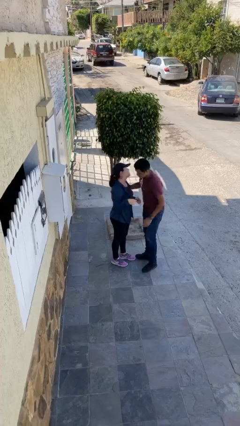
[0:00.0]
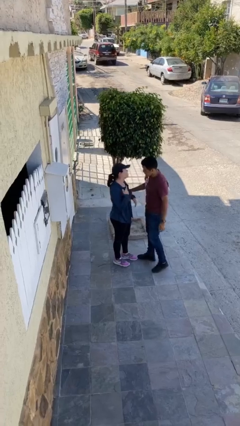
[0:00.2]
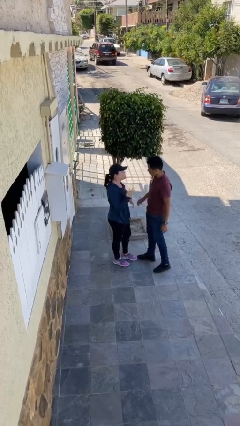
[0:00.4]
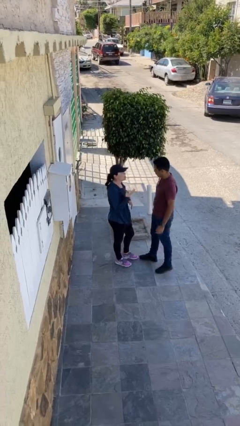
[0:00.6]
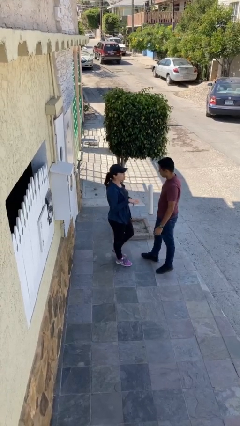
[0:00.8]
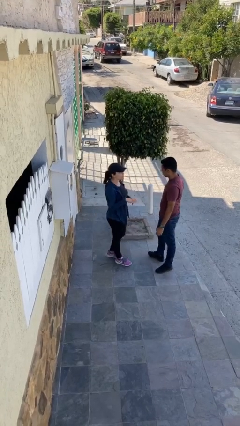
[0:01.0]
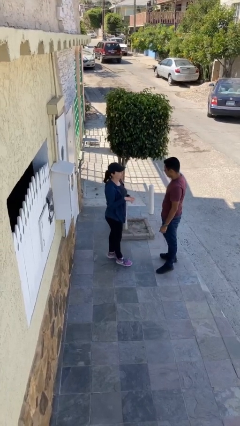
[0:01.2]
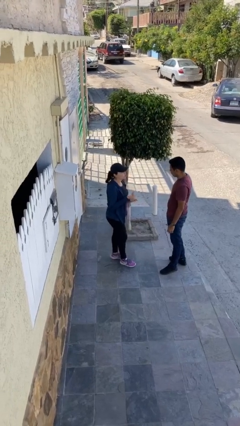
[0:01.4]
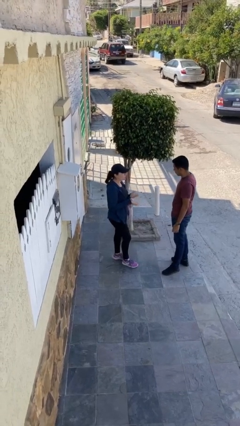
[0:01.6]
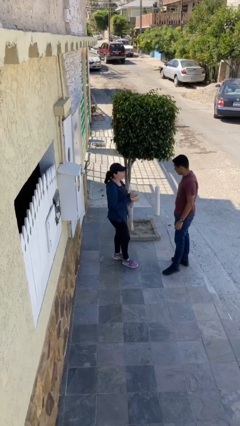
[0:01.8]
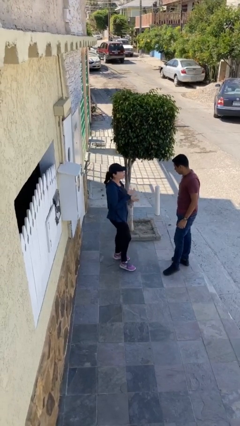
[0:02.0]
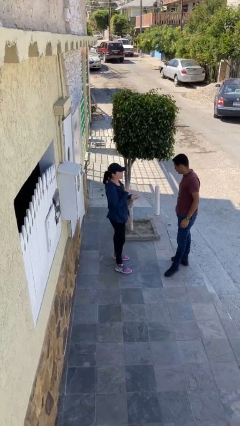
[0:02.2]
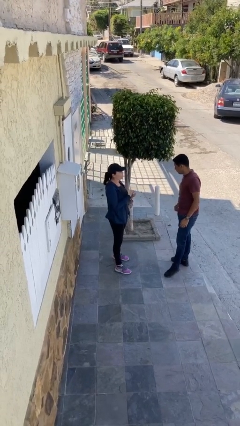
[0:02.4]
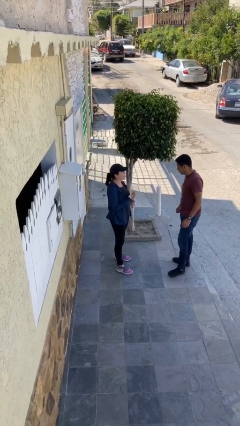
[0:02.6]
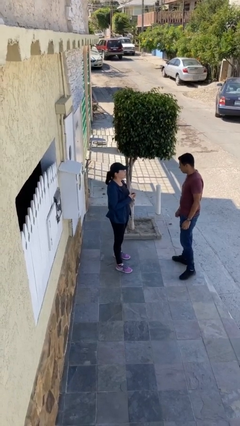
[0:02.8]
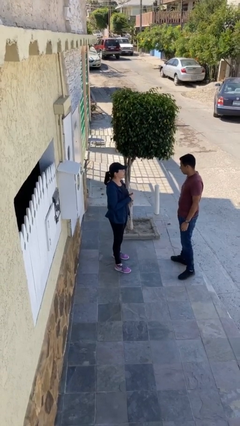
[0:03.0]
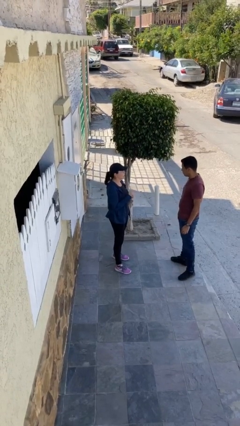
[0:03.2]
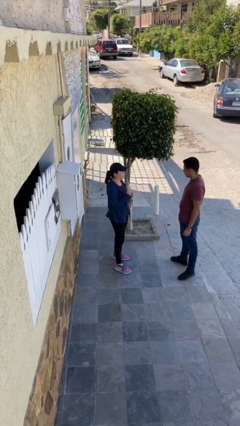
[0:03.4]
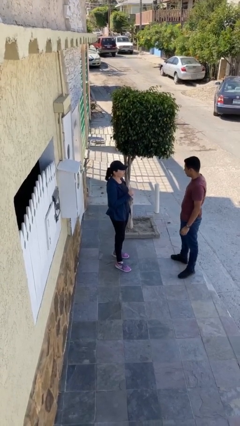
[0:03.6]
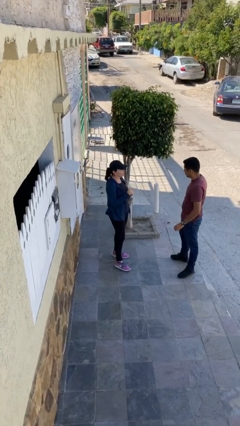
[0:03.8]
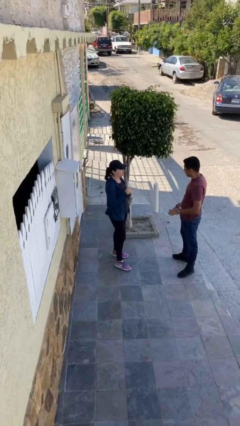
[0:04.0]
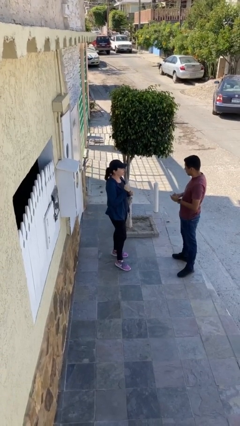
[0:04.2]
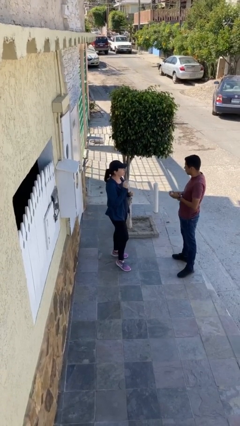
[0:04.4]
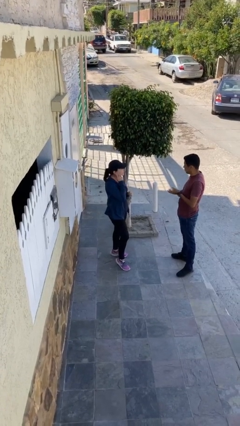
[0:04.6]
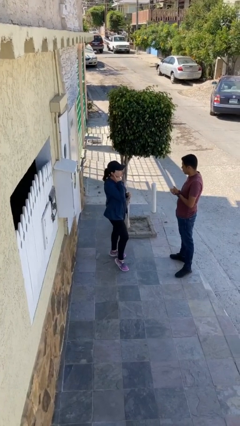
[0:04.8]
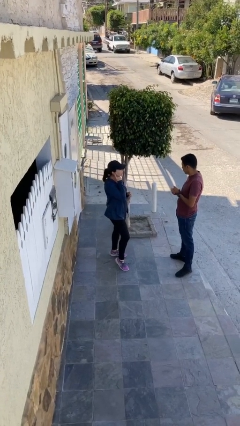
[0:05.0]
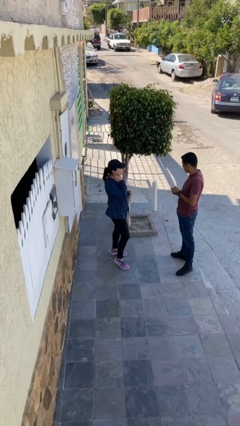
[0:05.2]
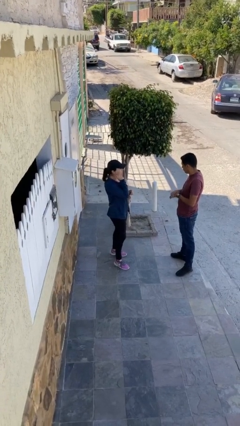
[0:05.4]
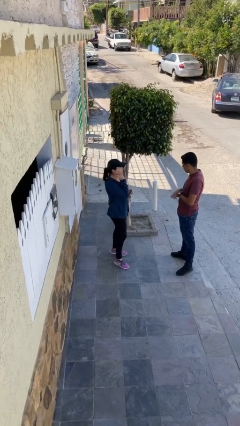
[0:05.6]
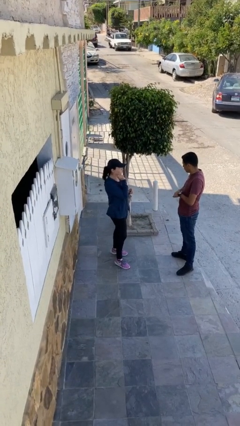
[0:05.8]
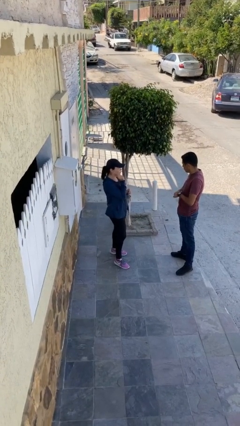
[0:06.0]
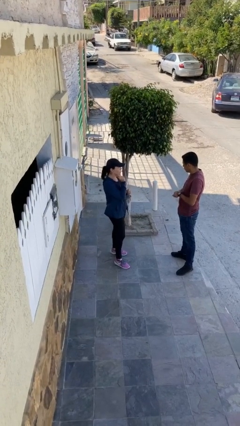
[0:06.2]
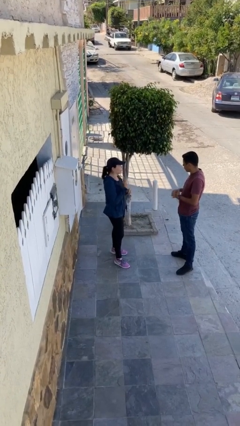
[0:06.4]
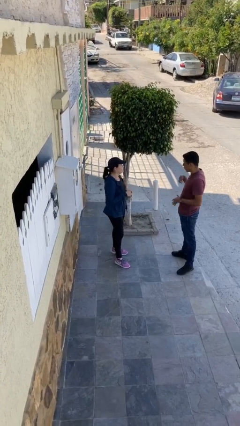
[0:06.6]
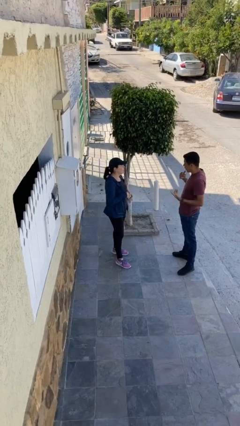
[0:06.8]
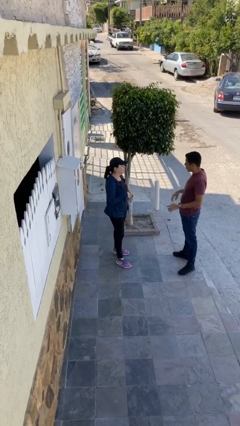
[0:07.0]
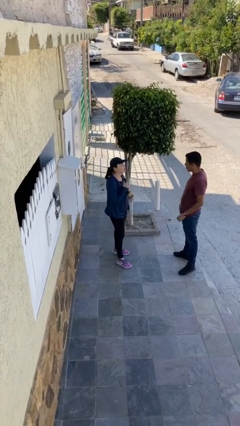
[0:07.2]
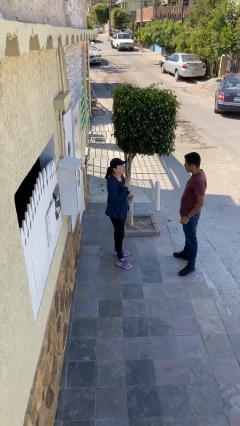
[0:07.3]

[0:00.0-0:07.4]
person talks to person

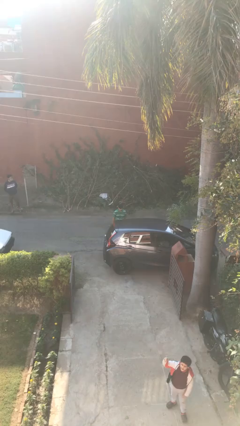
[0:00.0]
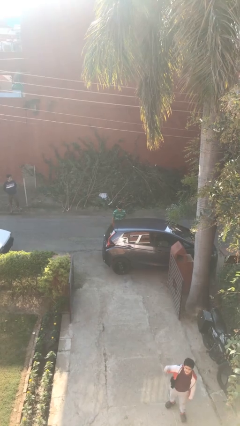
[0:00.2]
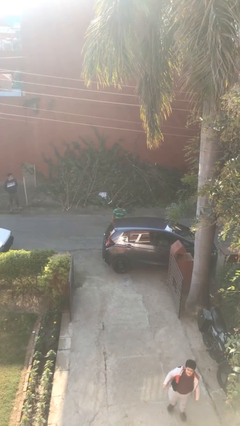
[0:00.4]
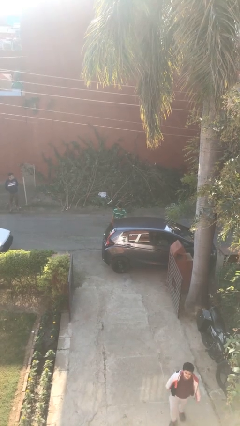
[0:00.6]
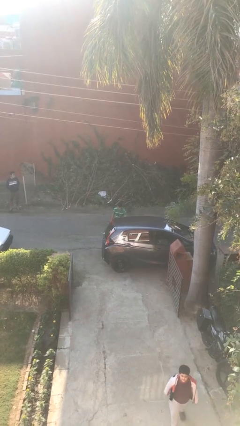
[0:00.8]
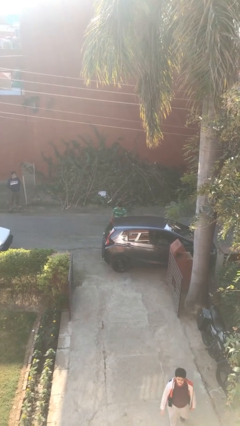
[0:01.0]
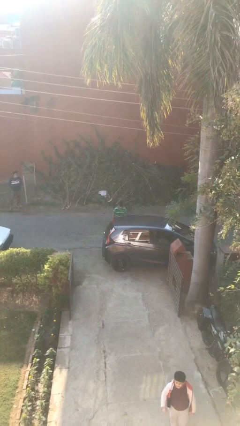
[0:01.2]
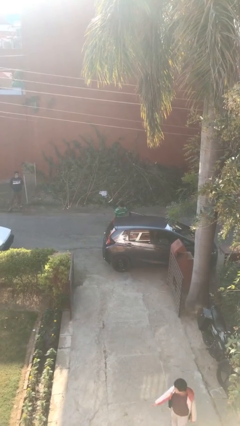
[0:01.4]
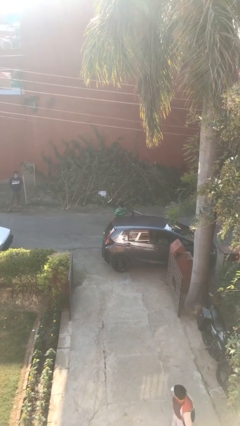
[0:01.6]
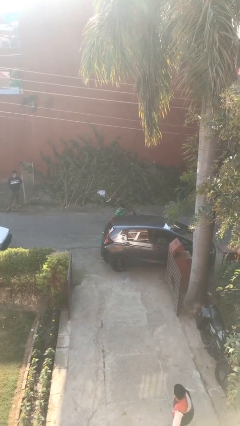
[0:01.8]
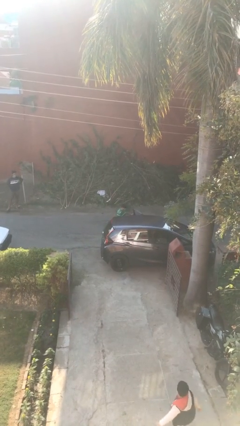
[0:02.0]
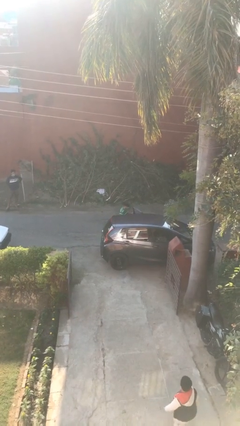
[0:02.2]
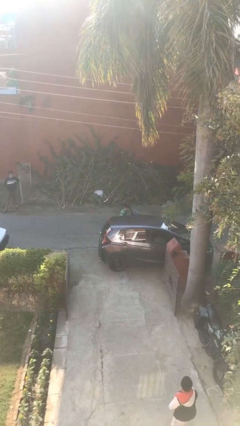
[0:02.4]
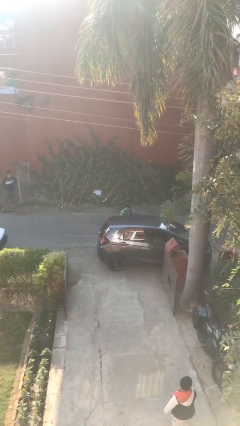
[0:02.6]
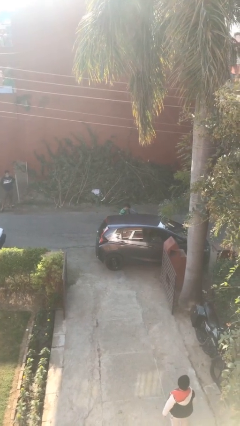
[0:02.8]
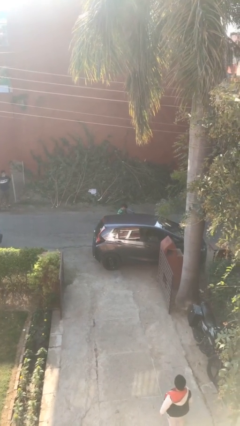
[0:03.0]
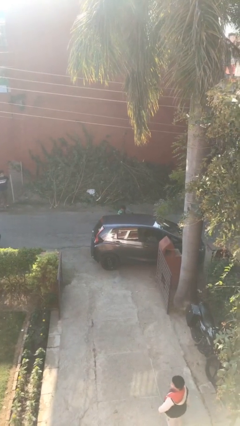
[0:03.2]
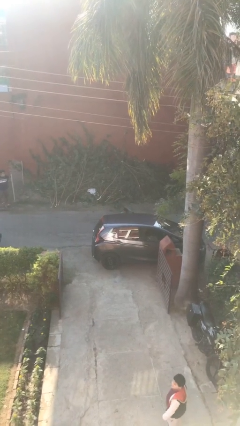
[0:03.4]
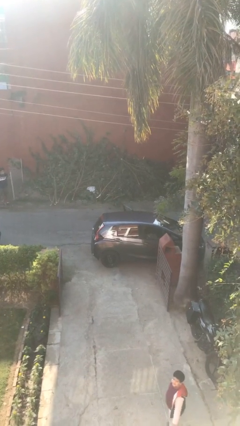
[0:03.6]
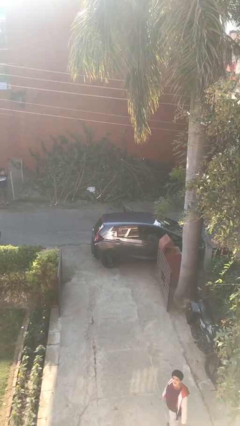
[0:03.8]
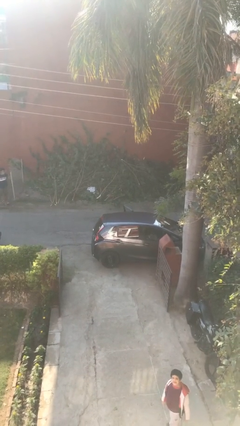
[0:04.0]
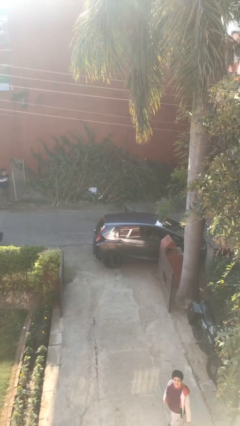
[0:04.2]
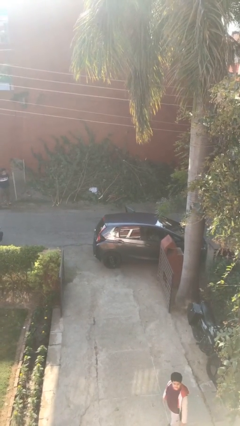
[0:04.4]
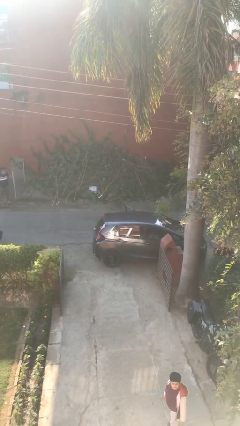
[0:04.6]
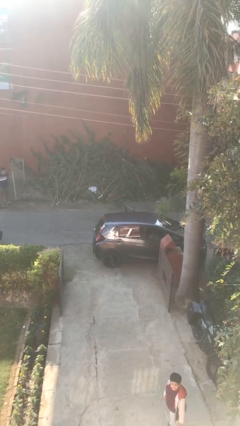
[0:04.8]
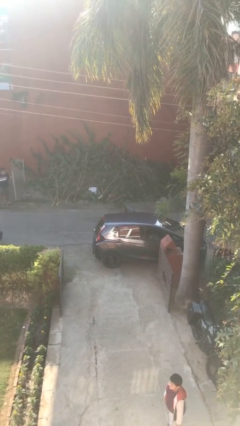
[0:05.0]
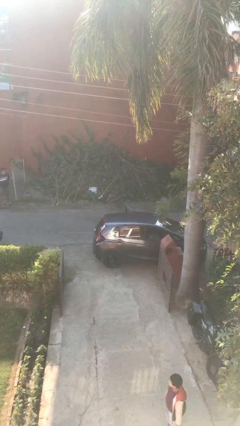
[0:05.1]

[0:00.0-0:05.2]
person enters car

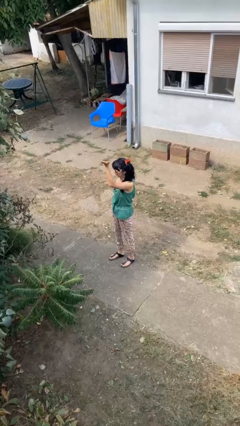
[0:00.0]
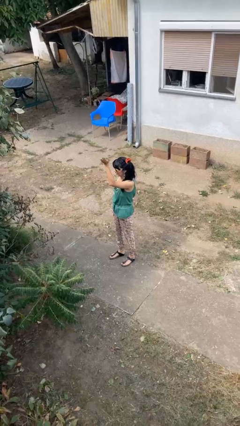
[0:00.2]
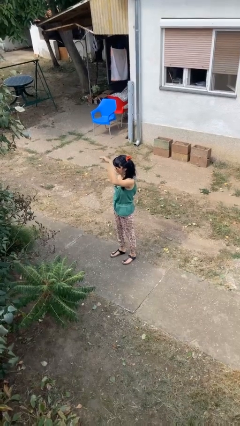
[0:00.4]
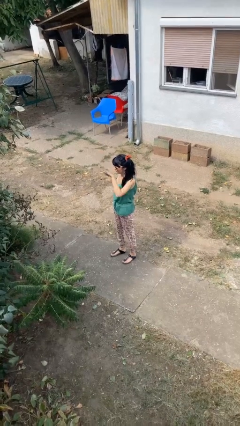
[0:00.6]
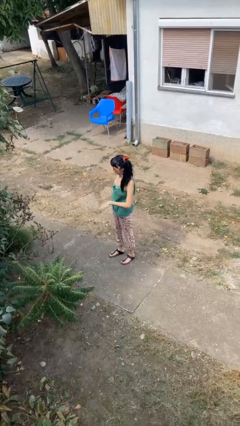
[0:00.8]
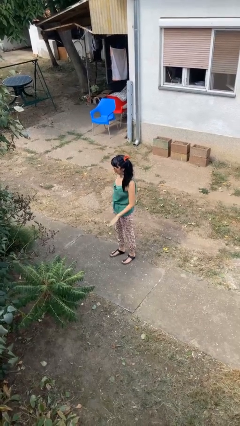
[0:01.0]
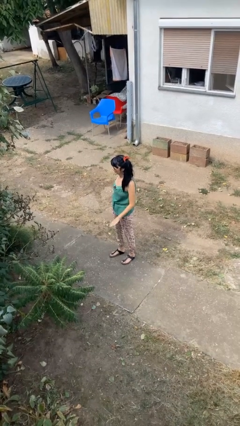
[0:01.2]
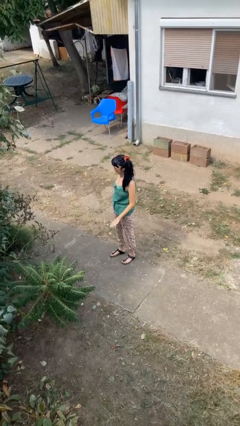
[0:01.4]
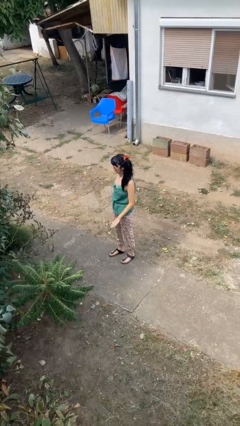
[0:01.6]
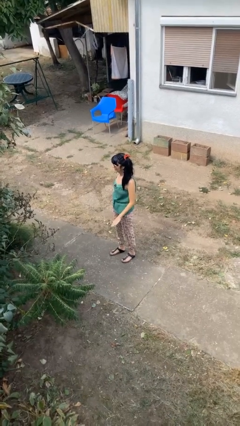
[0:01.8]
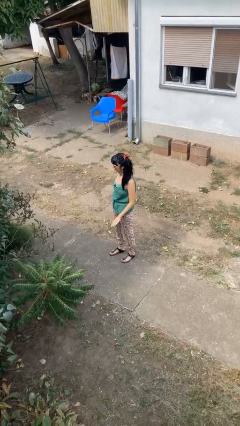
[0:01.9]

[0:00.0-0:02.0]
person gestures swipe down

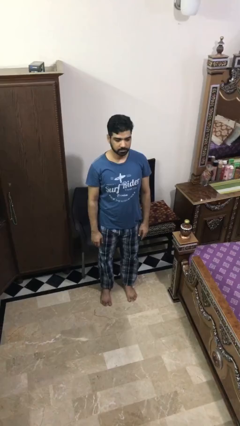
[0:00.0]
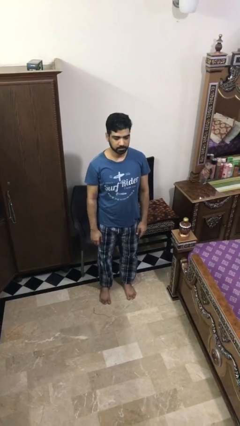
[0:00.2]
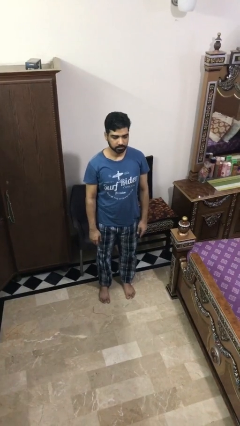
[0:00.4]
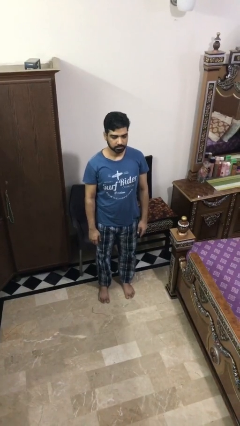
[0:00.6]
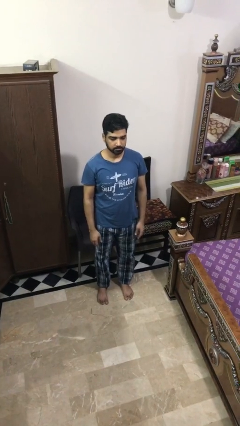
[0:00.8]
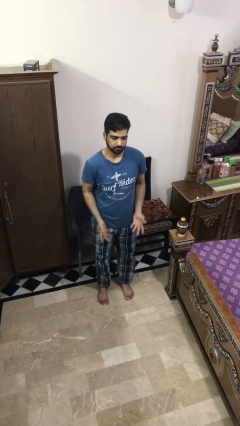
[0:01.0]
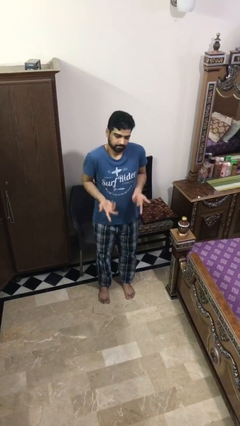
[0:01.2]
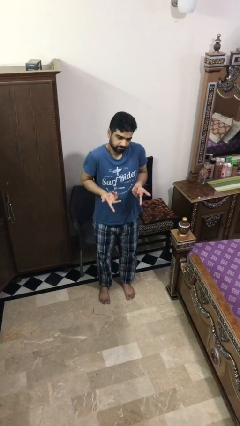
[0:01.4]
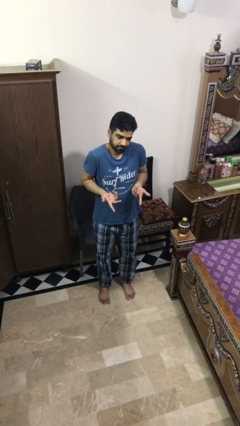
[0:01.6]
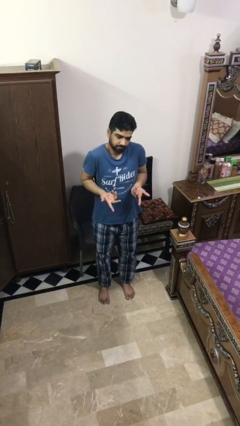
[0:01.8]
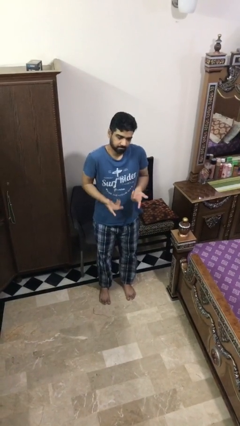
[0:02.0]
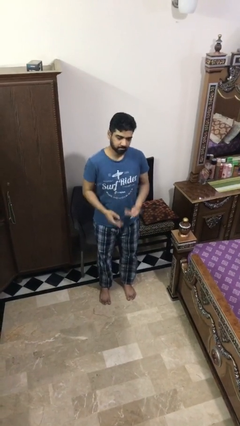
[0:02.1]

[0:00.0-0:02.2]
person shrugs

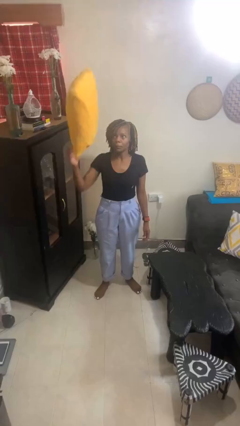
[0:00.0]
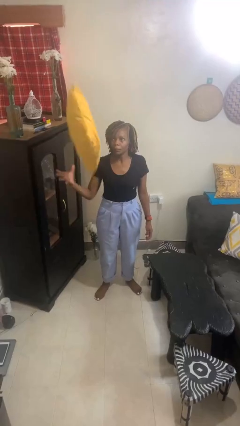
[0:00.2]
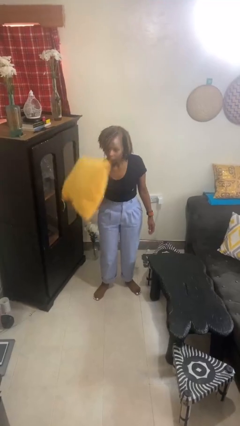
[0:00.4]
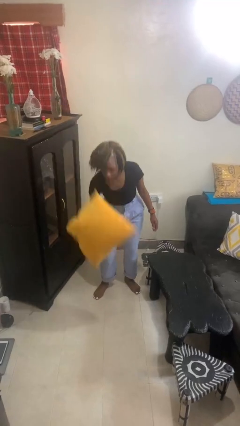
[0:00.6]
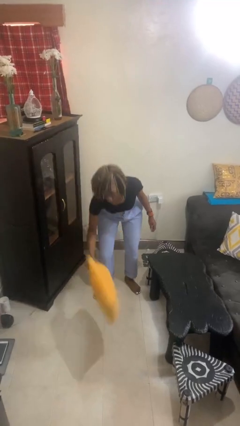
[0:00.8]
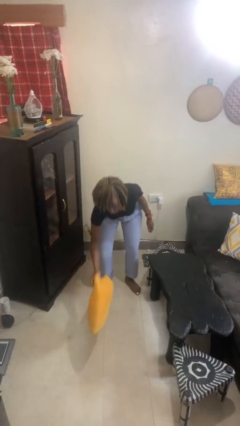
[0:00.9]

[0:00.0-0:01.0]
person drops object
